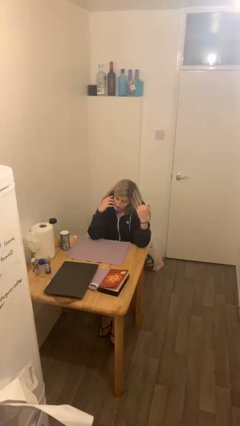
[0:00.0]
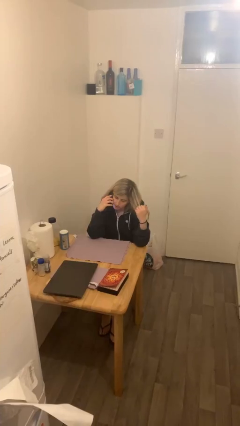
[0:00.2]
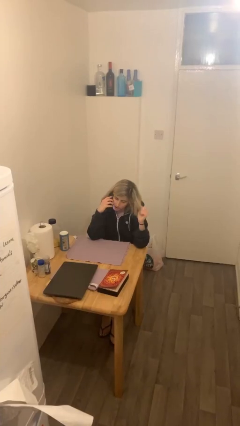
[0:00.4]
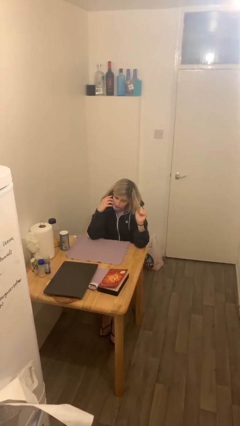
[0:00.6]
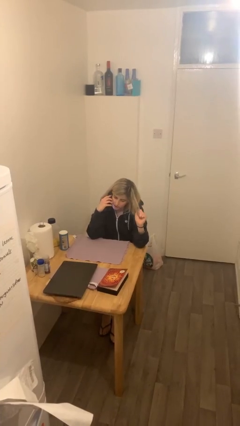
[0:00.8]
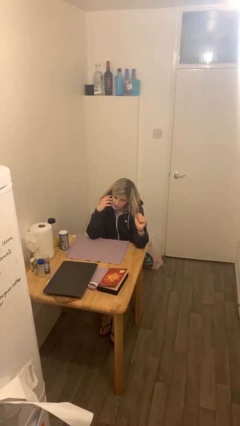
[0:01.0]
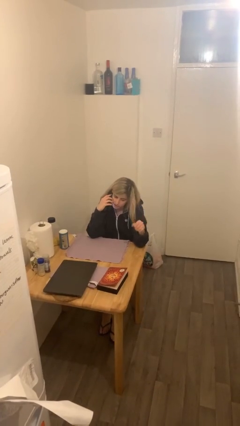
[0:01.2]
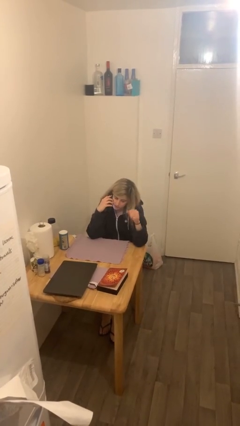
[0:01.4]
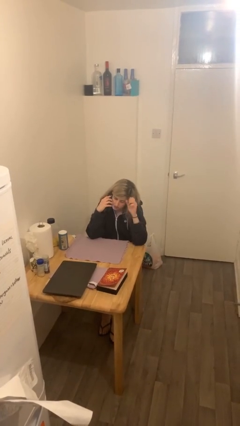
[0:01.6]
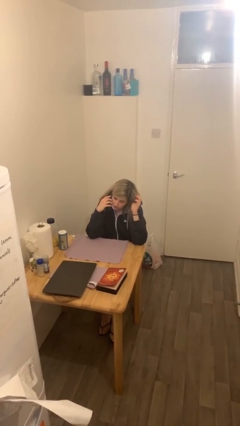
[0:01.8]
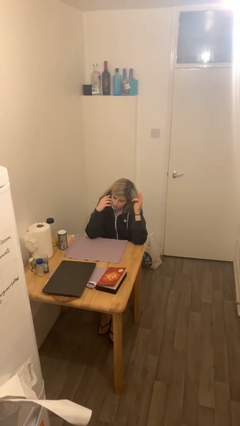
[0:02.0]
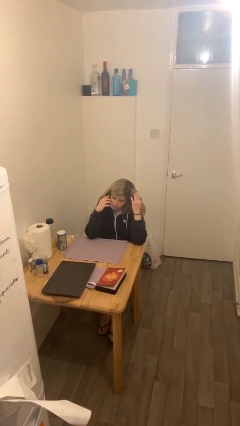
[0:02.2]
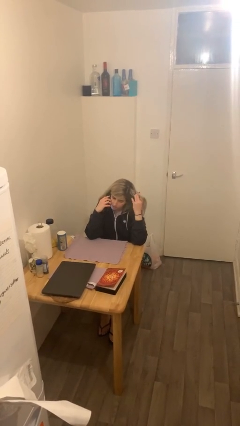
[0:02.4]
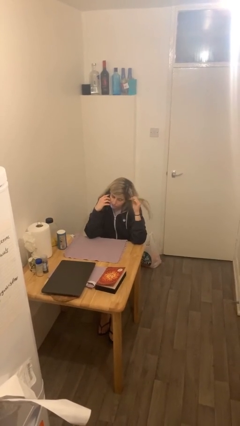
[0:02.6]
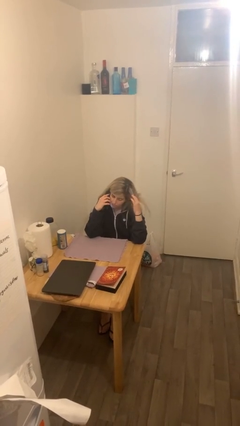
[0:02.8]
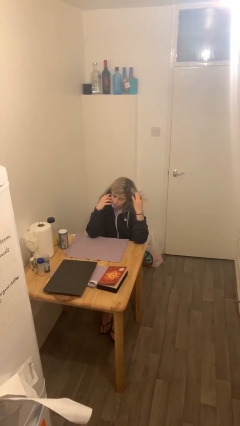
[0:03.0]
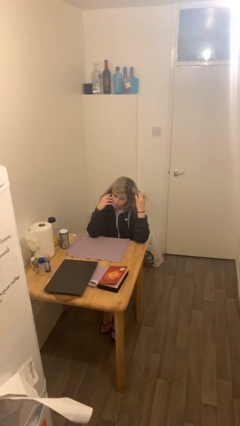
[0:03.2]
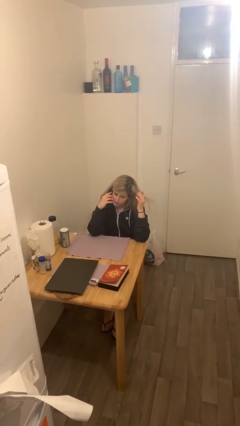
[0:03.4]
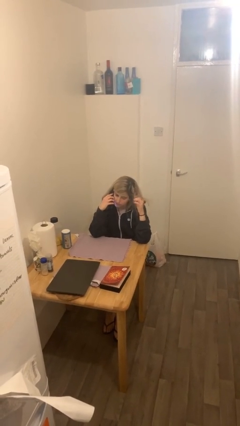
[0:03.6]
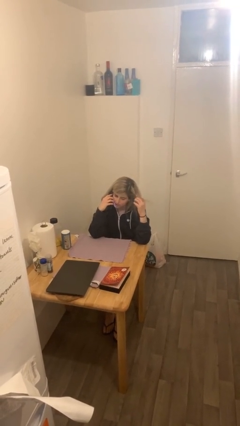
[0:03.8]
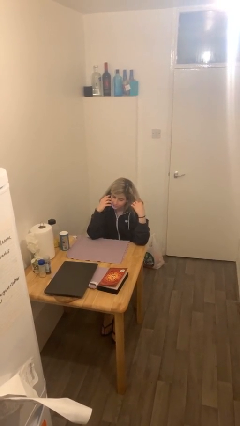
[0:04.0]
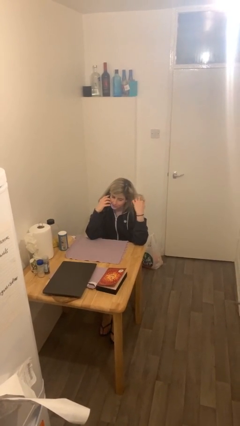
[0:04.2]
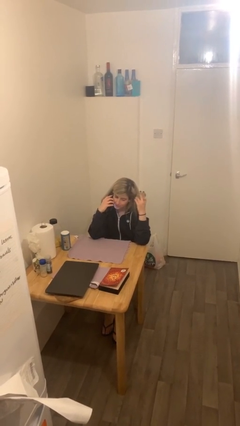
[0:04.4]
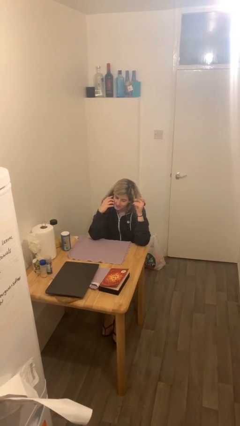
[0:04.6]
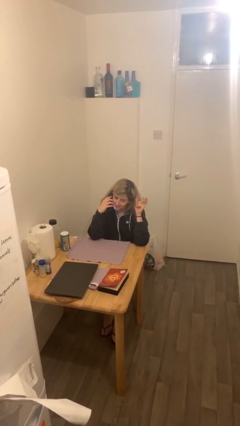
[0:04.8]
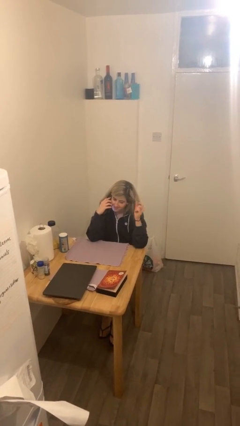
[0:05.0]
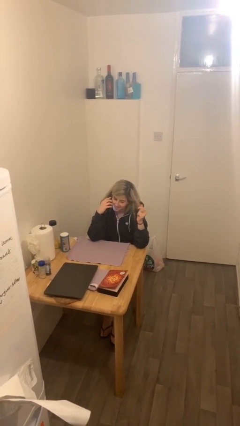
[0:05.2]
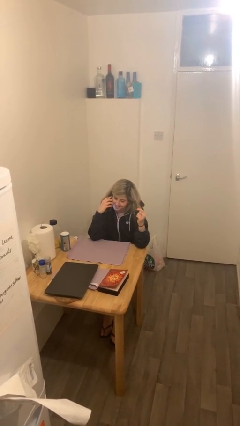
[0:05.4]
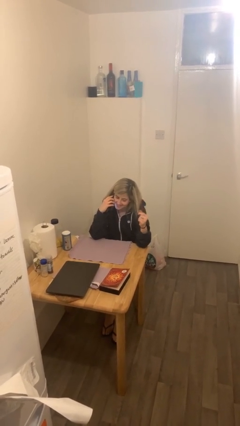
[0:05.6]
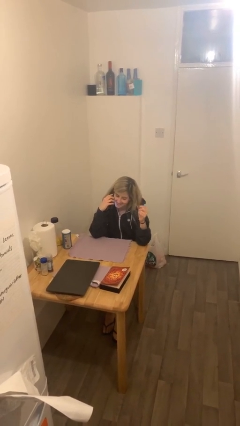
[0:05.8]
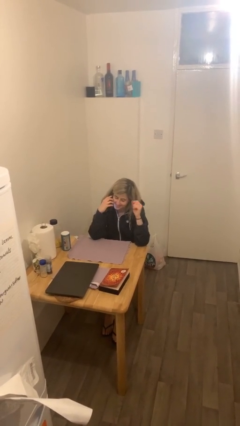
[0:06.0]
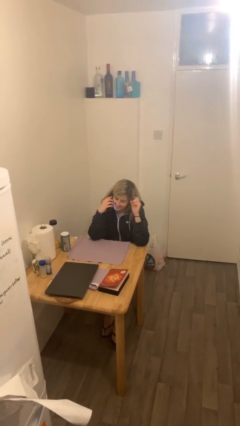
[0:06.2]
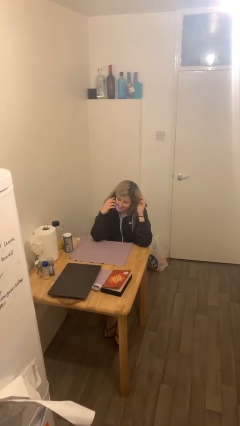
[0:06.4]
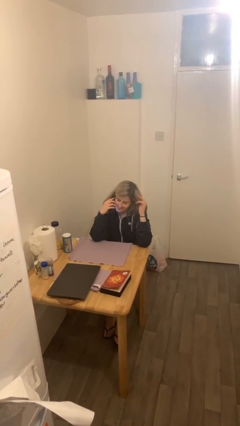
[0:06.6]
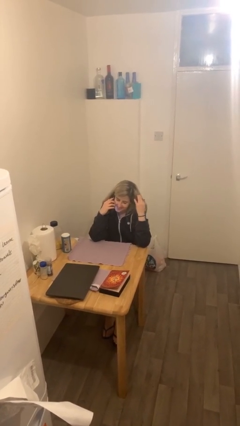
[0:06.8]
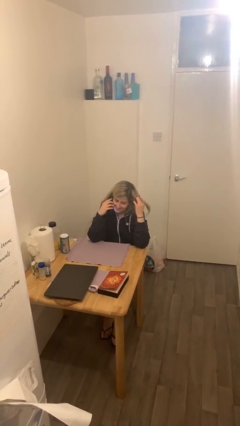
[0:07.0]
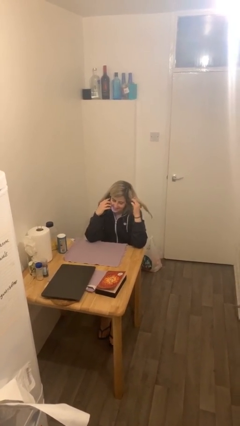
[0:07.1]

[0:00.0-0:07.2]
person talks on phone

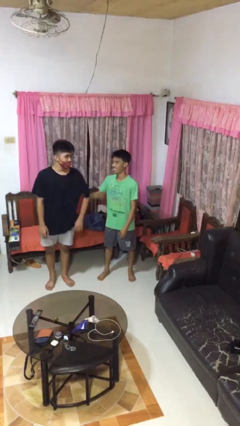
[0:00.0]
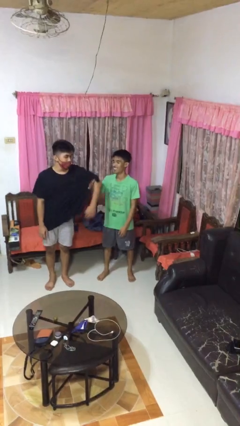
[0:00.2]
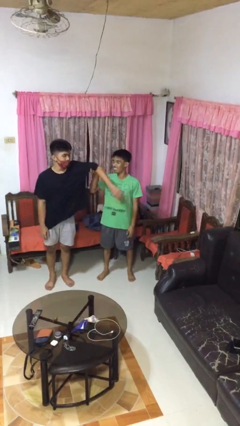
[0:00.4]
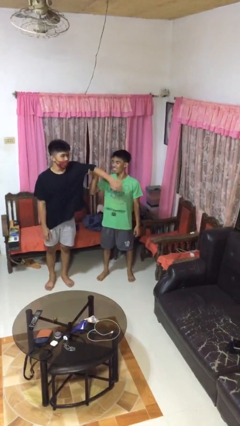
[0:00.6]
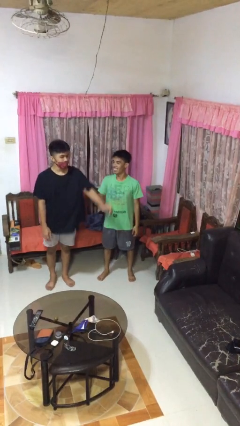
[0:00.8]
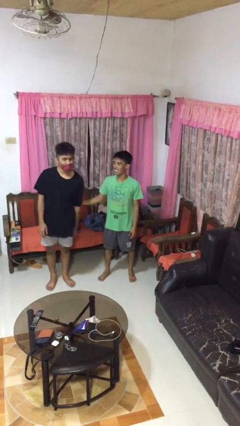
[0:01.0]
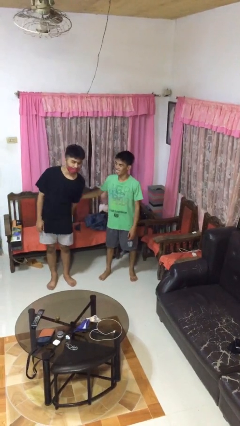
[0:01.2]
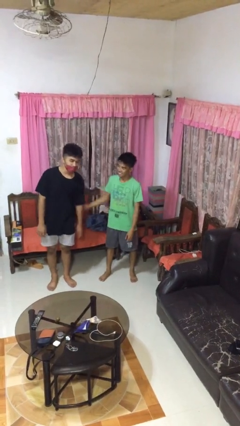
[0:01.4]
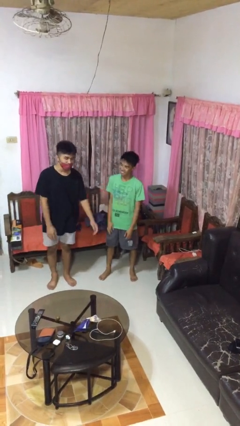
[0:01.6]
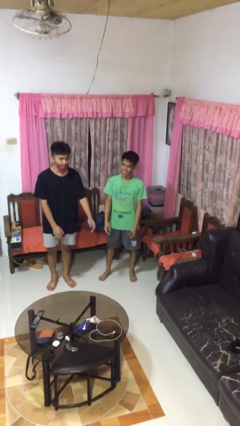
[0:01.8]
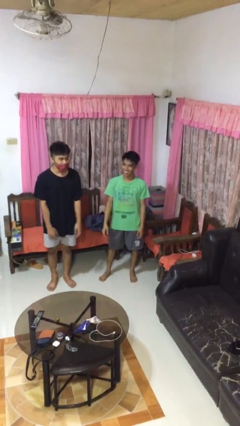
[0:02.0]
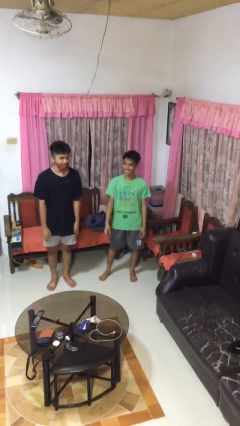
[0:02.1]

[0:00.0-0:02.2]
person grabs person by bicep

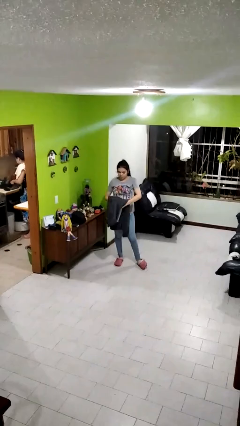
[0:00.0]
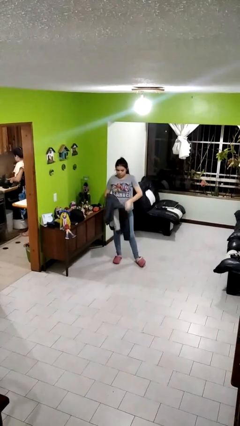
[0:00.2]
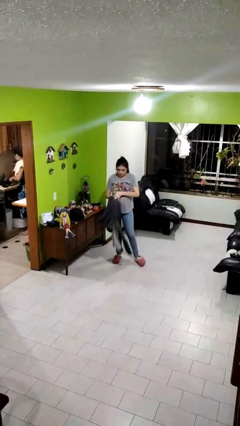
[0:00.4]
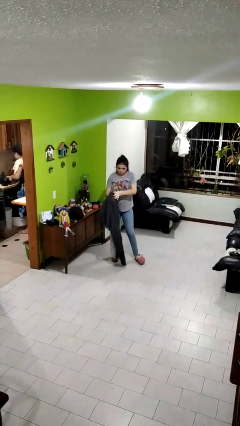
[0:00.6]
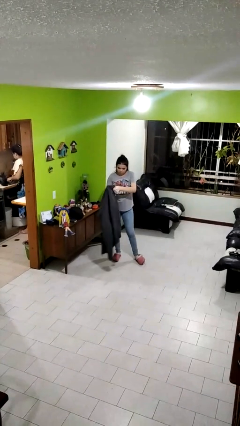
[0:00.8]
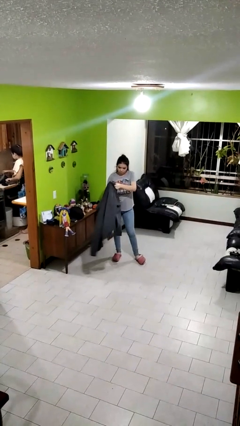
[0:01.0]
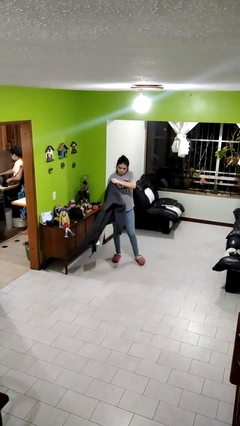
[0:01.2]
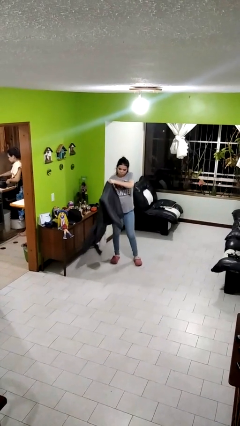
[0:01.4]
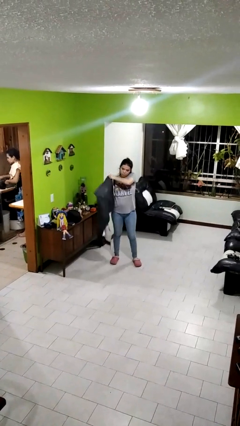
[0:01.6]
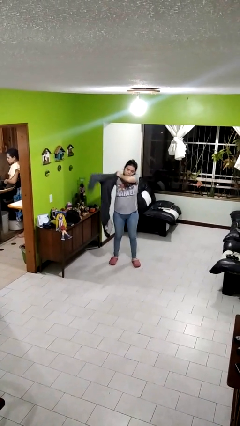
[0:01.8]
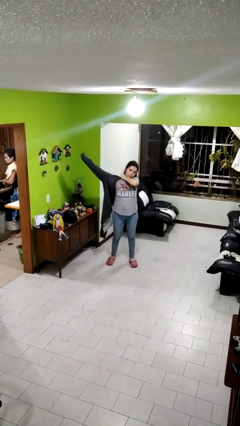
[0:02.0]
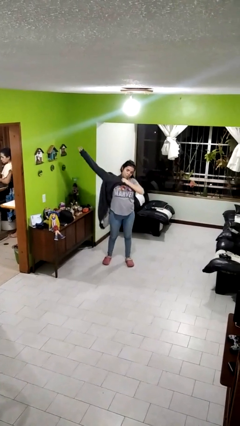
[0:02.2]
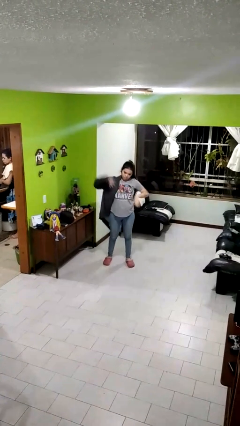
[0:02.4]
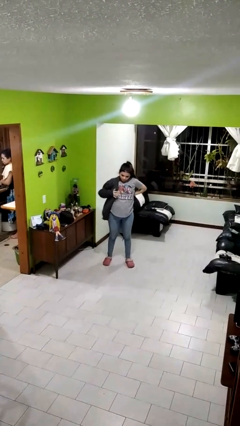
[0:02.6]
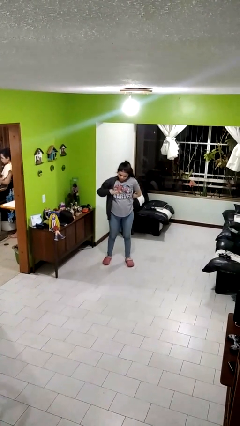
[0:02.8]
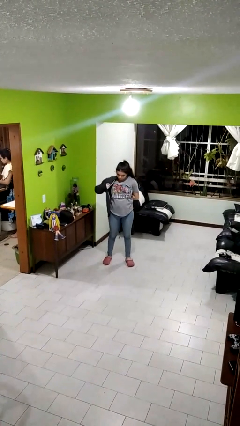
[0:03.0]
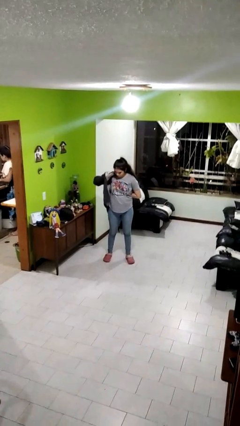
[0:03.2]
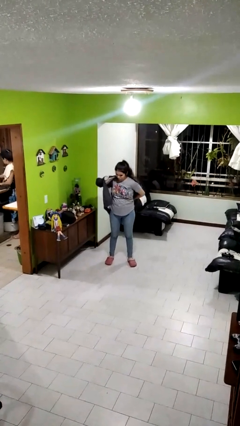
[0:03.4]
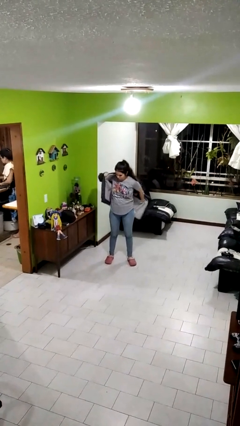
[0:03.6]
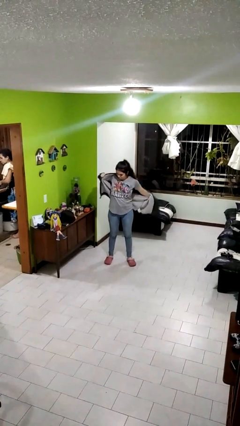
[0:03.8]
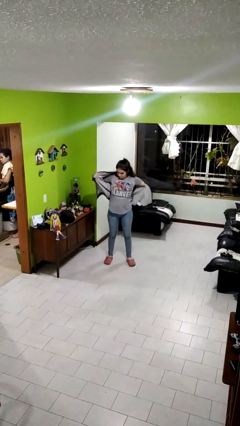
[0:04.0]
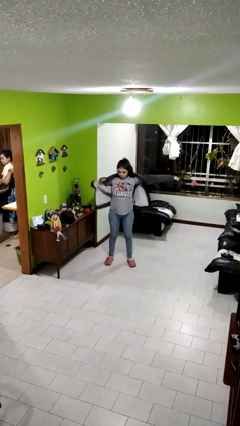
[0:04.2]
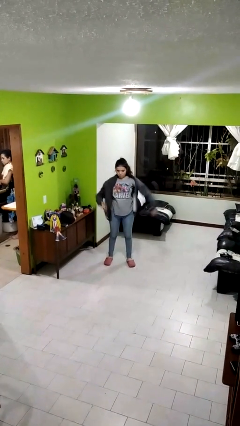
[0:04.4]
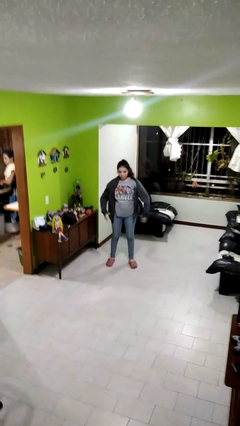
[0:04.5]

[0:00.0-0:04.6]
person puts on jacket

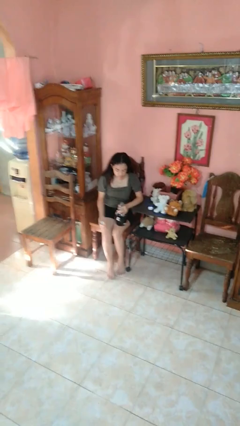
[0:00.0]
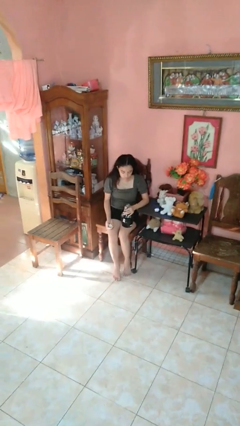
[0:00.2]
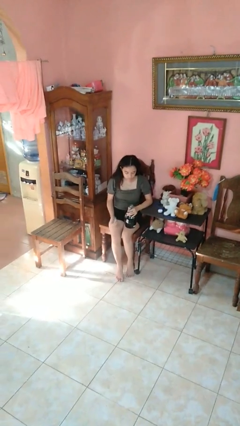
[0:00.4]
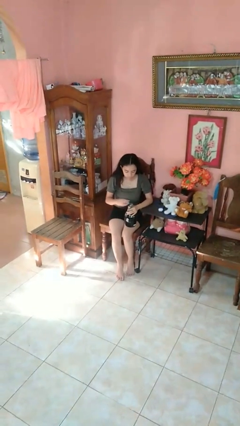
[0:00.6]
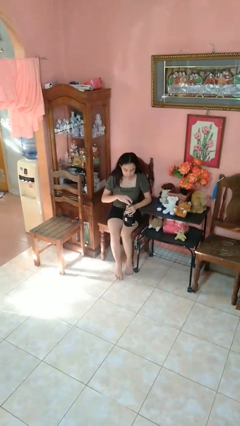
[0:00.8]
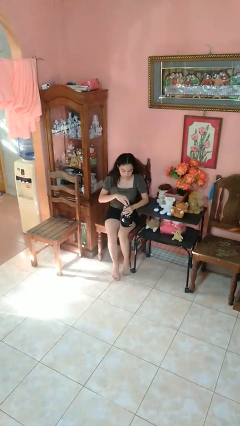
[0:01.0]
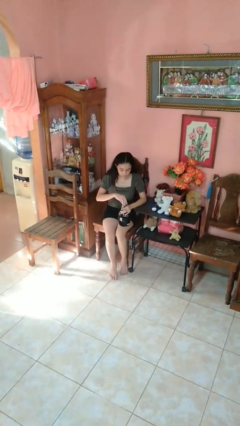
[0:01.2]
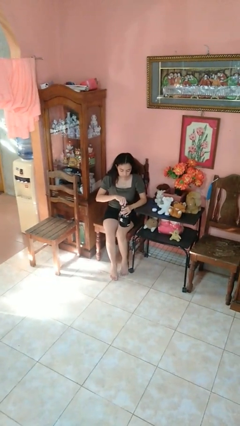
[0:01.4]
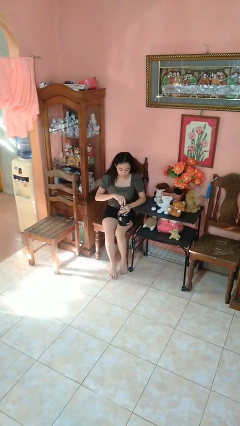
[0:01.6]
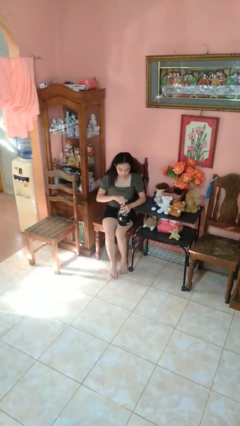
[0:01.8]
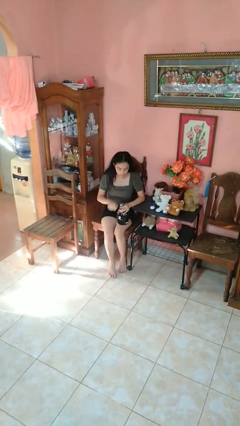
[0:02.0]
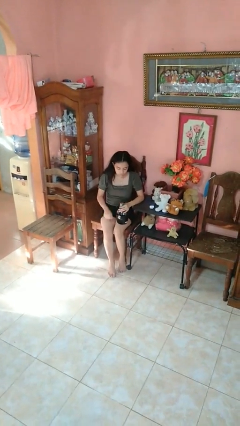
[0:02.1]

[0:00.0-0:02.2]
person screws lid to bottle

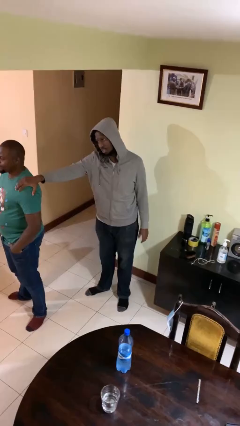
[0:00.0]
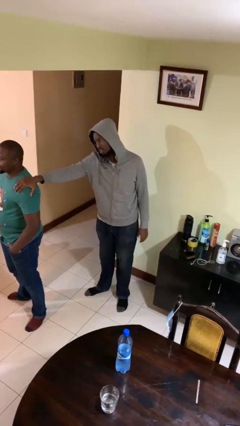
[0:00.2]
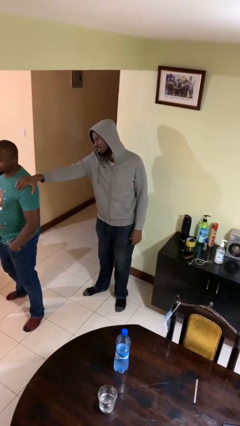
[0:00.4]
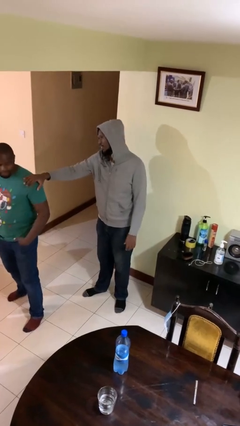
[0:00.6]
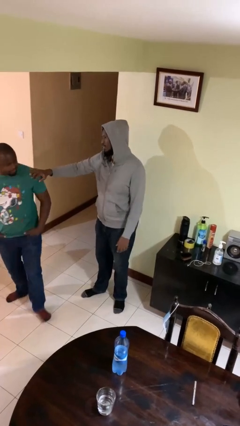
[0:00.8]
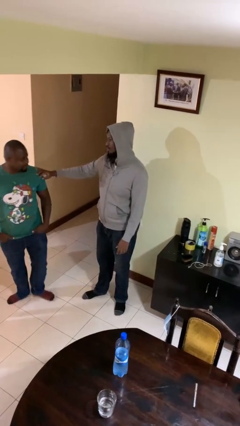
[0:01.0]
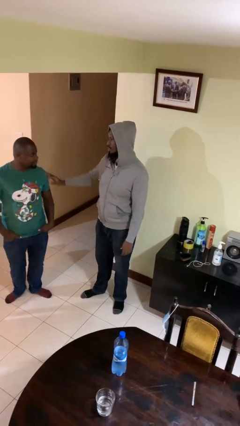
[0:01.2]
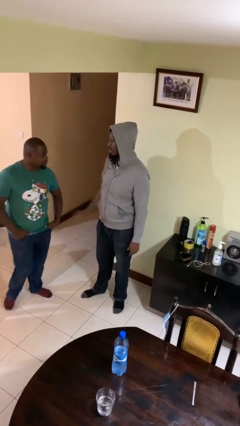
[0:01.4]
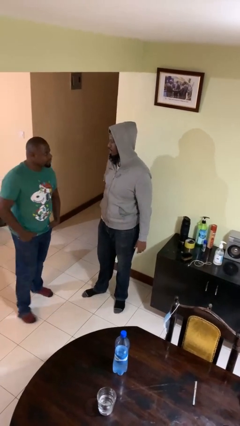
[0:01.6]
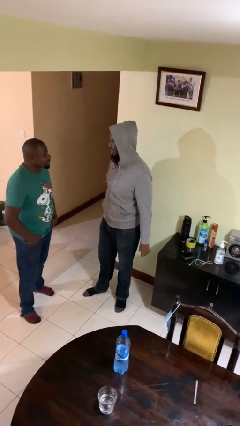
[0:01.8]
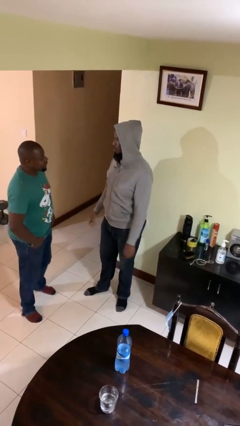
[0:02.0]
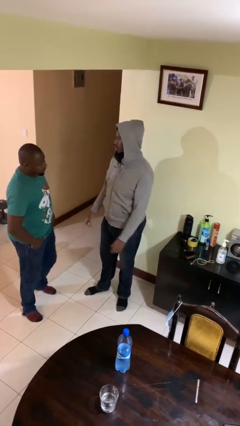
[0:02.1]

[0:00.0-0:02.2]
person spins person around
